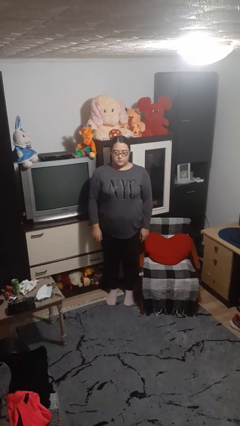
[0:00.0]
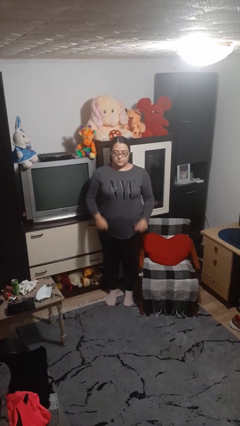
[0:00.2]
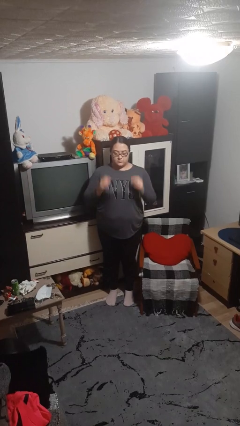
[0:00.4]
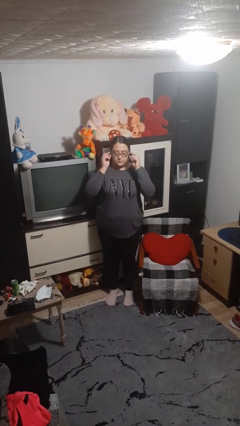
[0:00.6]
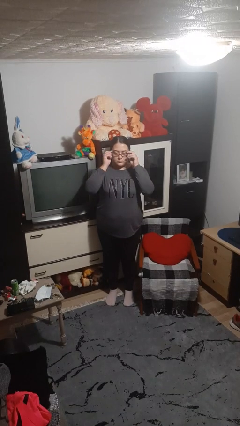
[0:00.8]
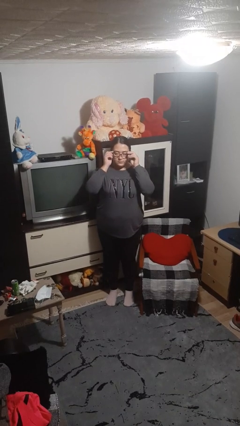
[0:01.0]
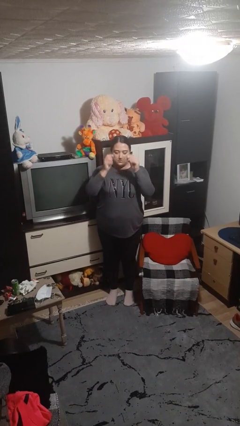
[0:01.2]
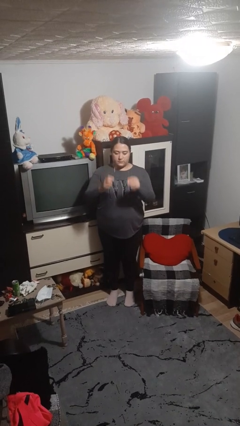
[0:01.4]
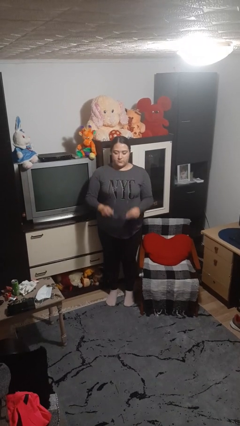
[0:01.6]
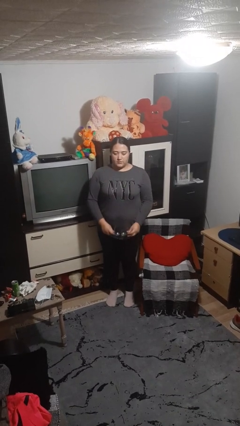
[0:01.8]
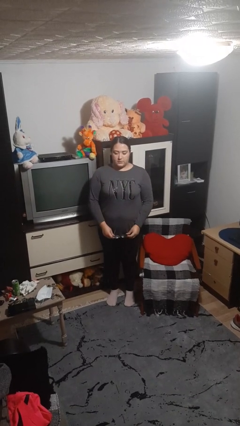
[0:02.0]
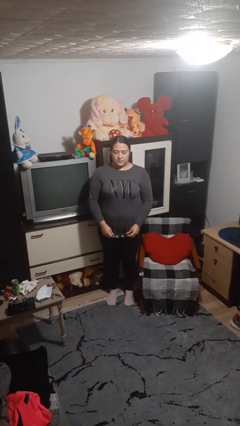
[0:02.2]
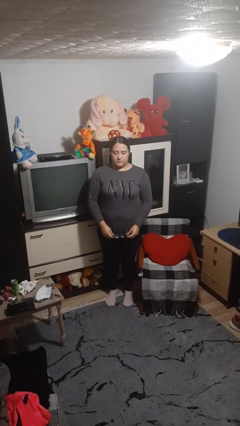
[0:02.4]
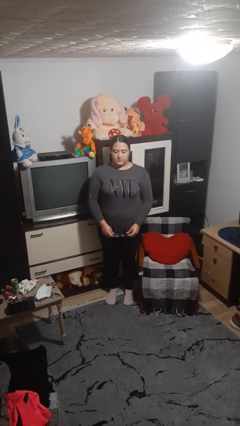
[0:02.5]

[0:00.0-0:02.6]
person takes off glasses

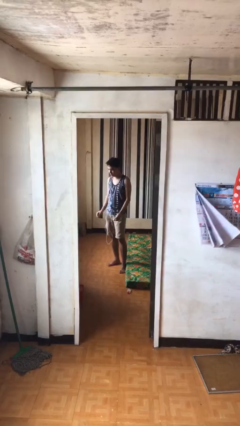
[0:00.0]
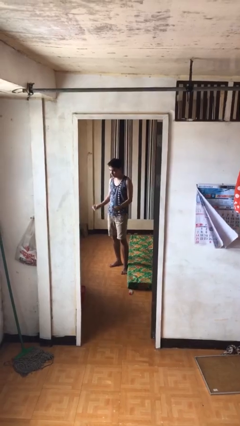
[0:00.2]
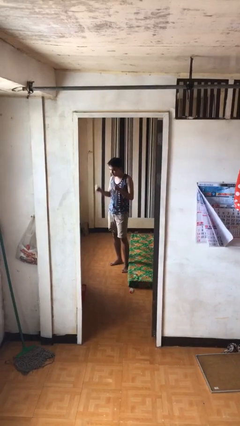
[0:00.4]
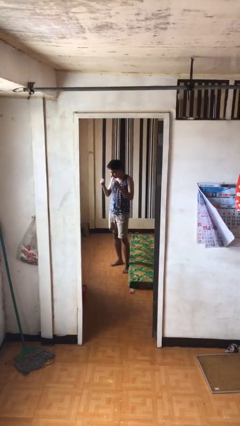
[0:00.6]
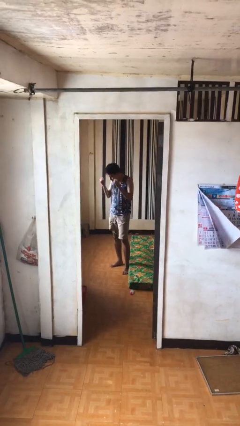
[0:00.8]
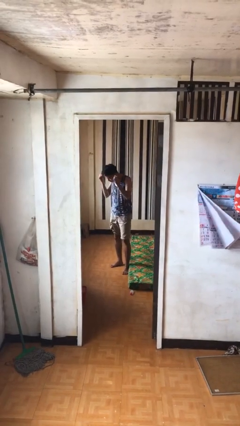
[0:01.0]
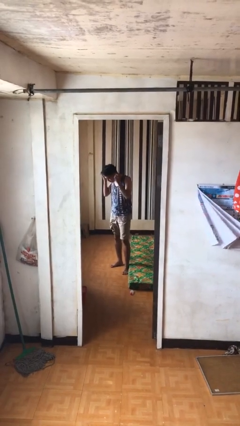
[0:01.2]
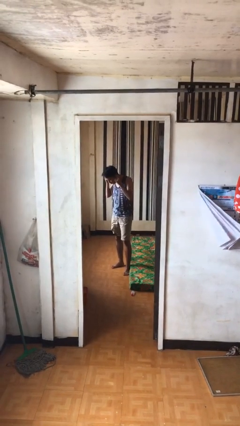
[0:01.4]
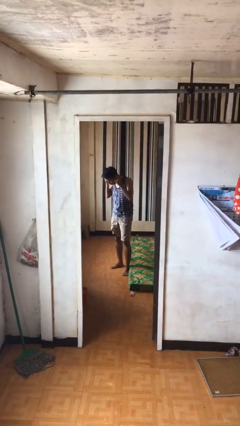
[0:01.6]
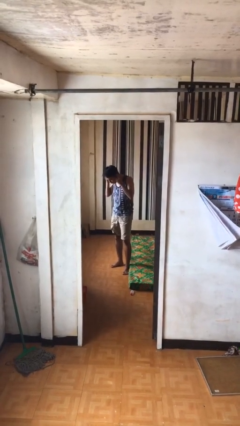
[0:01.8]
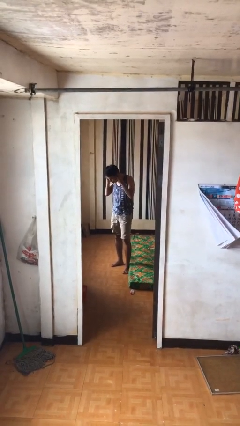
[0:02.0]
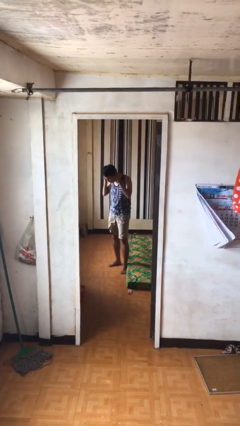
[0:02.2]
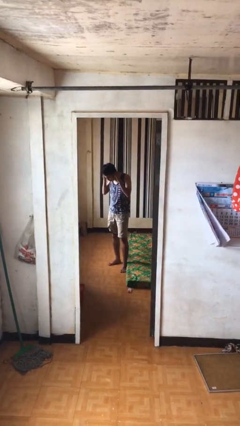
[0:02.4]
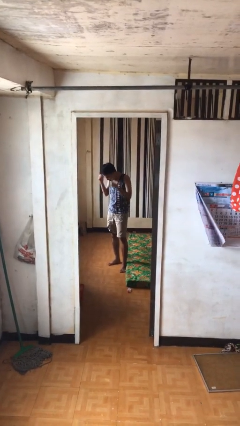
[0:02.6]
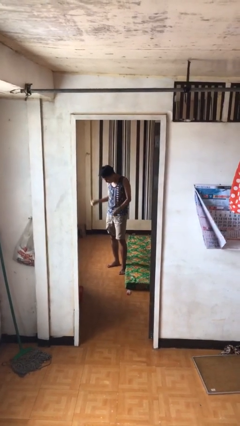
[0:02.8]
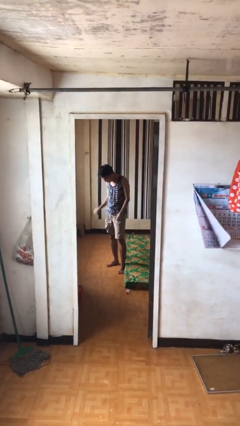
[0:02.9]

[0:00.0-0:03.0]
person puts on headphones

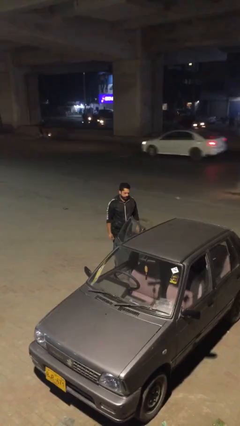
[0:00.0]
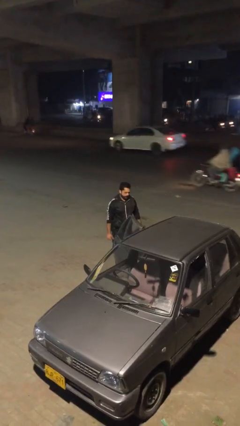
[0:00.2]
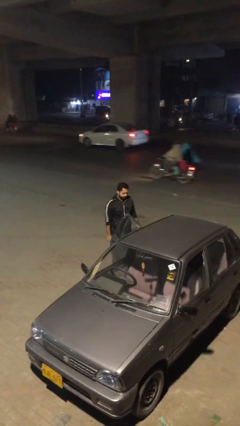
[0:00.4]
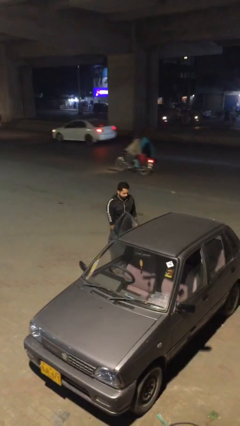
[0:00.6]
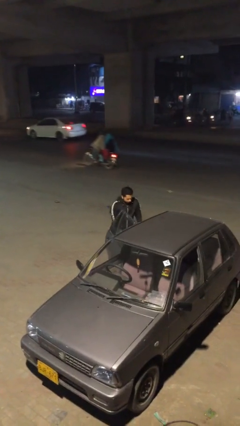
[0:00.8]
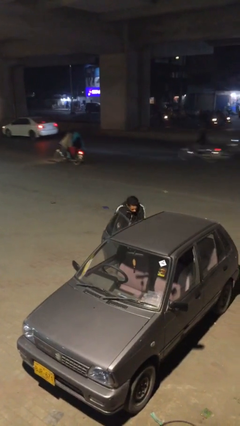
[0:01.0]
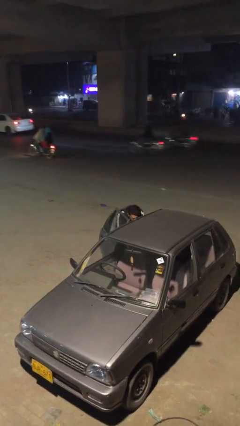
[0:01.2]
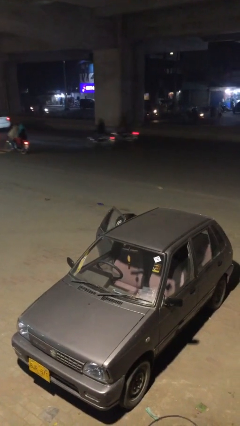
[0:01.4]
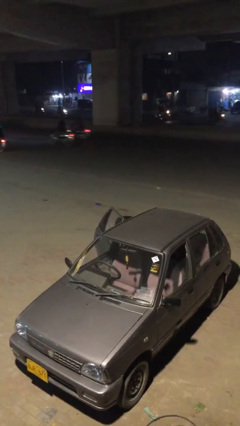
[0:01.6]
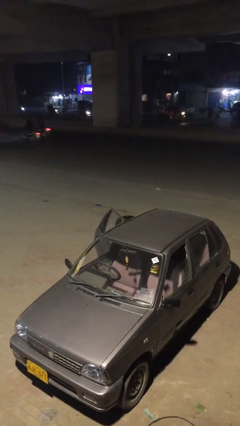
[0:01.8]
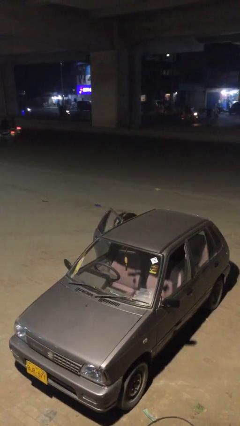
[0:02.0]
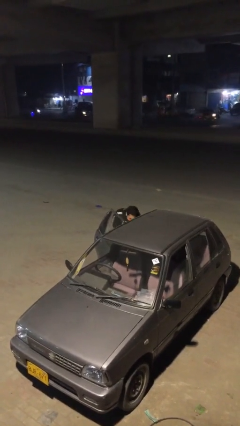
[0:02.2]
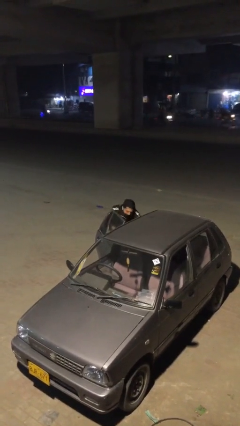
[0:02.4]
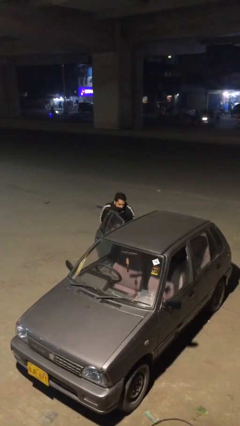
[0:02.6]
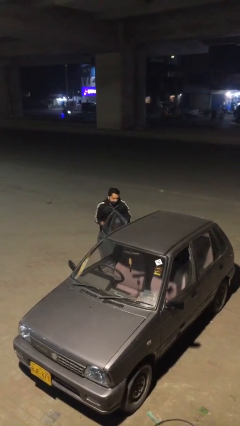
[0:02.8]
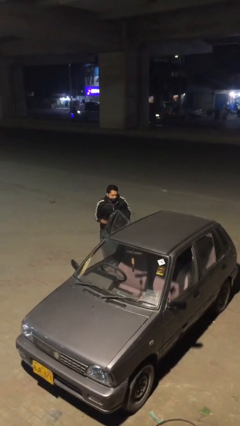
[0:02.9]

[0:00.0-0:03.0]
person unloads car

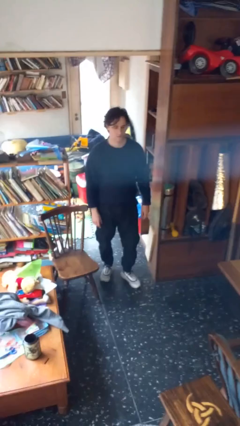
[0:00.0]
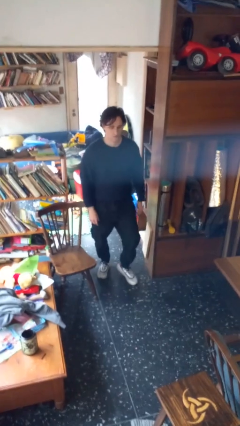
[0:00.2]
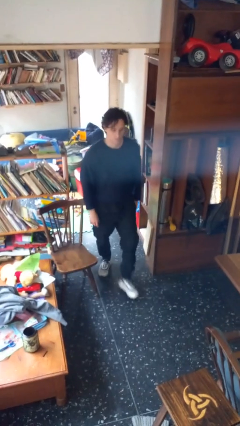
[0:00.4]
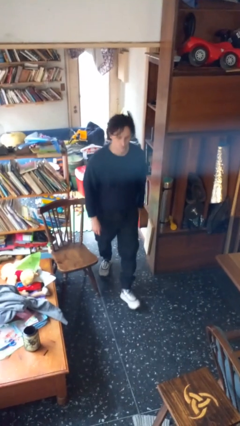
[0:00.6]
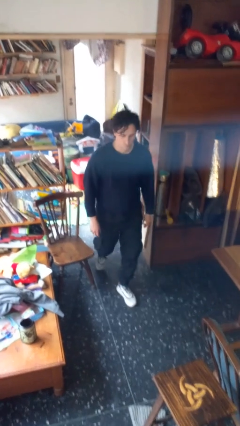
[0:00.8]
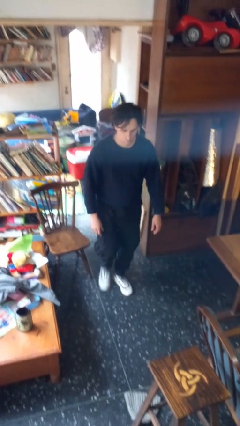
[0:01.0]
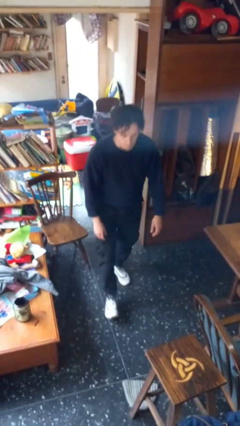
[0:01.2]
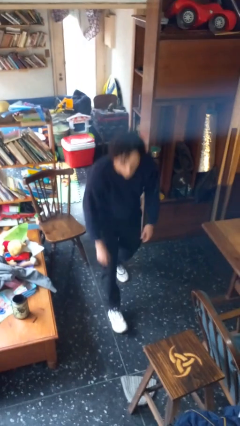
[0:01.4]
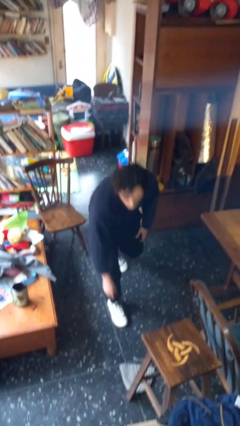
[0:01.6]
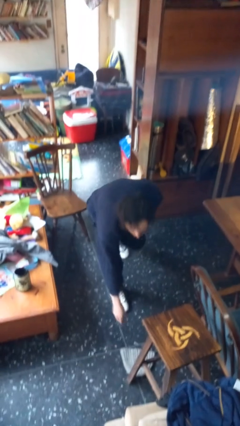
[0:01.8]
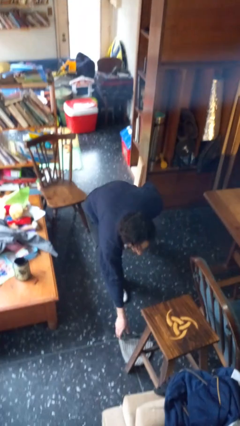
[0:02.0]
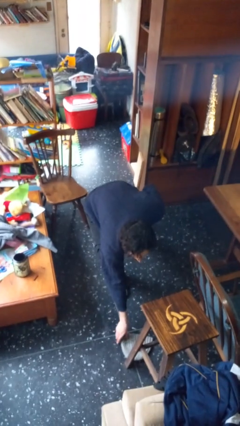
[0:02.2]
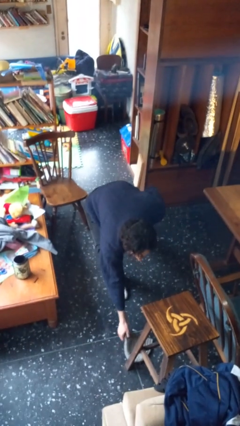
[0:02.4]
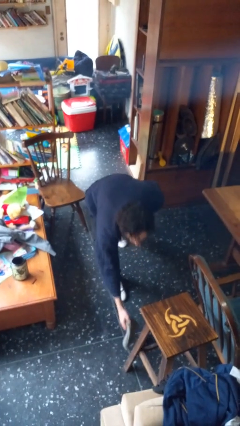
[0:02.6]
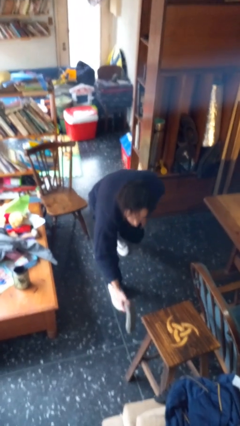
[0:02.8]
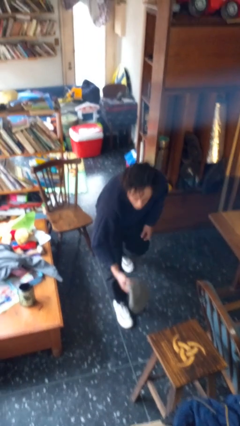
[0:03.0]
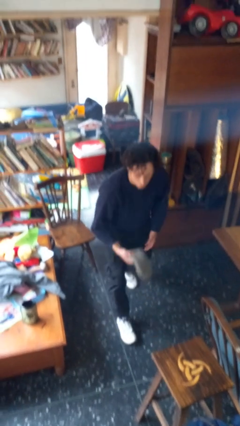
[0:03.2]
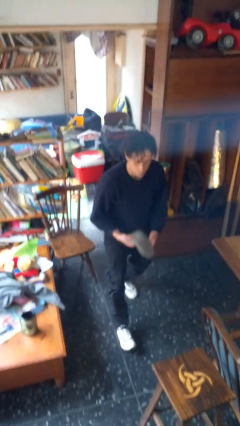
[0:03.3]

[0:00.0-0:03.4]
person picks up object from floor

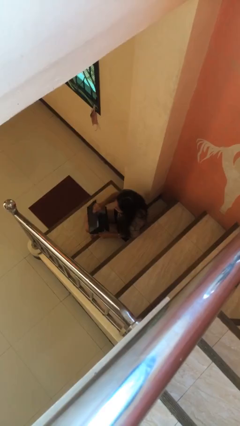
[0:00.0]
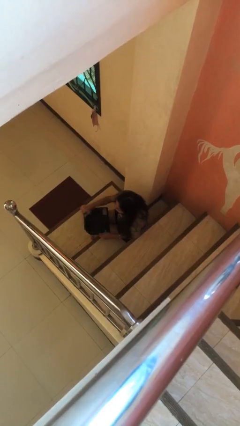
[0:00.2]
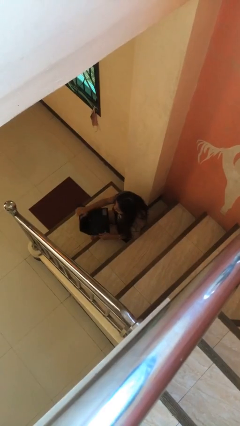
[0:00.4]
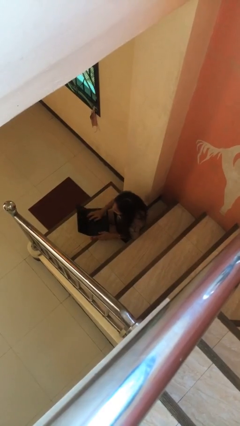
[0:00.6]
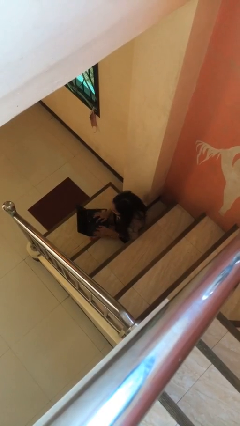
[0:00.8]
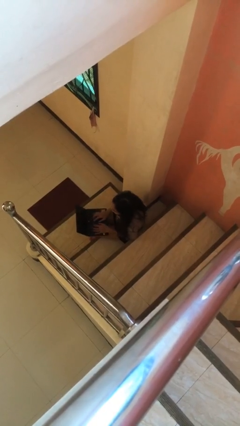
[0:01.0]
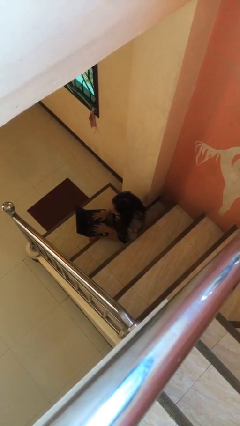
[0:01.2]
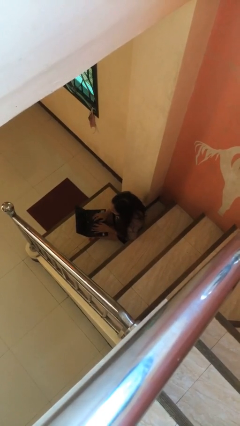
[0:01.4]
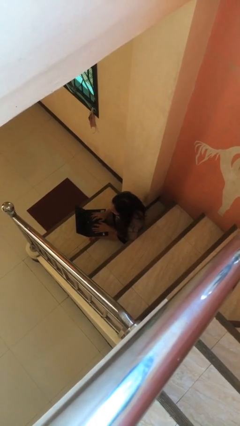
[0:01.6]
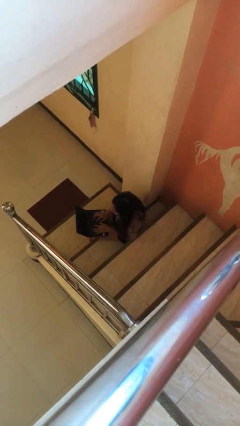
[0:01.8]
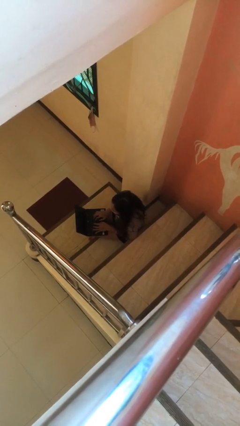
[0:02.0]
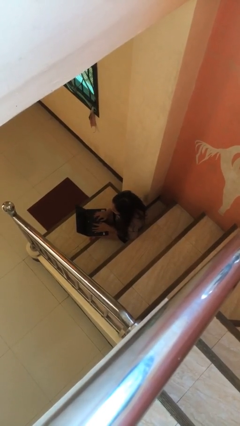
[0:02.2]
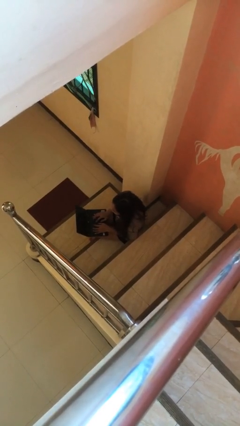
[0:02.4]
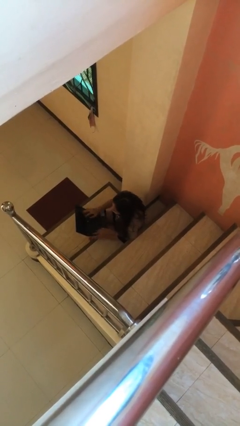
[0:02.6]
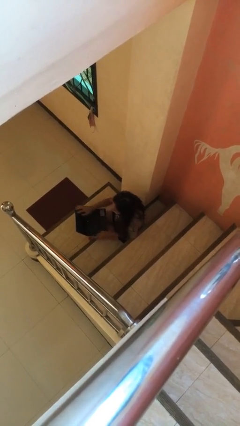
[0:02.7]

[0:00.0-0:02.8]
person interacts with laptop

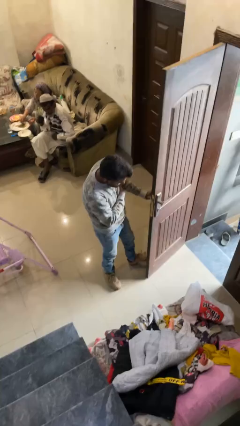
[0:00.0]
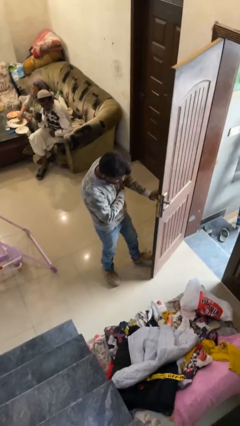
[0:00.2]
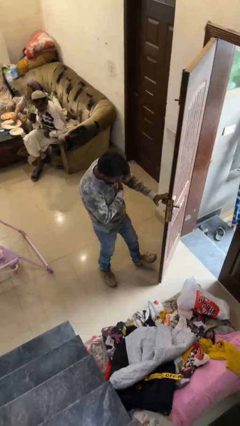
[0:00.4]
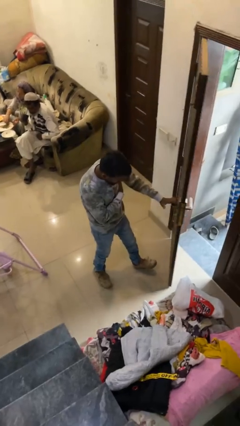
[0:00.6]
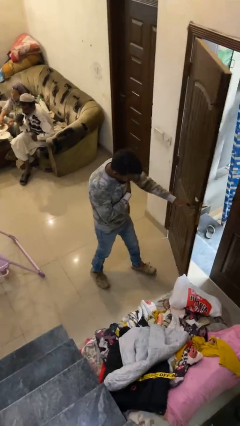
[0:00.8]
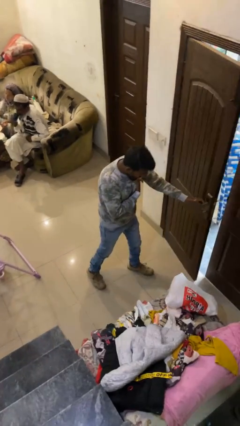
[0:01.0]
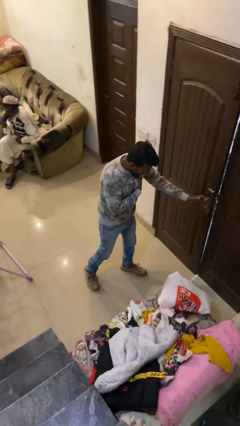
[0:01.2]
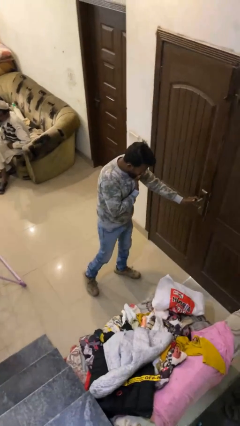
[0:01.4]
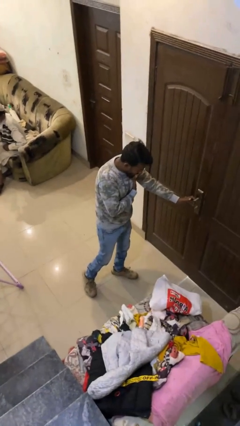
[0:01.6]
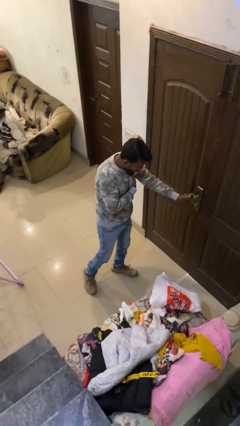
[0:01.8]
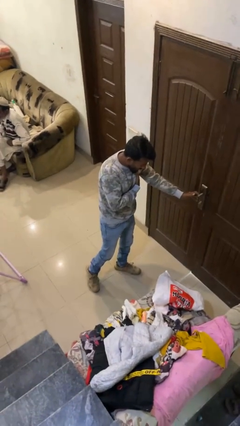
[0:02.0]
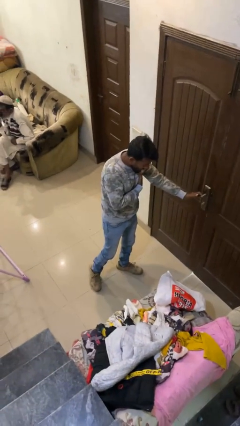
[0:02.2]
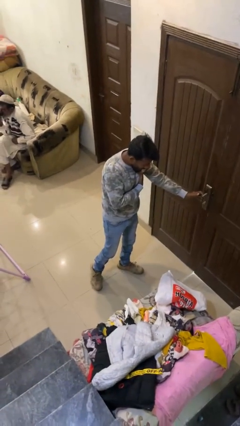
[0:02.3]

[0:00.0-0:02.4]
person closes facility door
